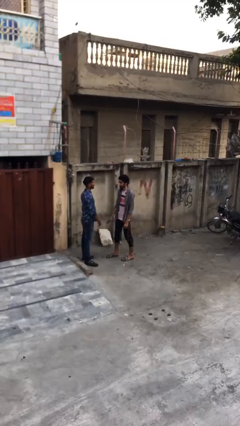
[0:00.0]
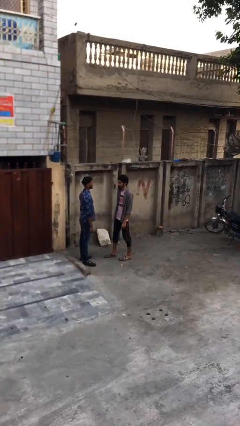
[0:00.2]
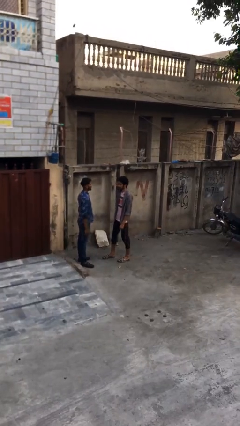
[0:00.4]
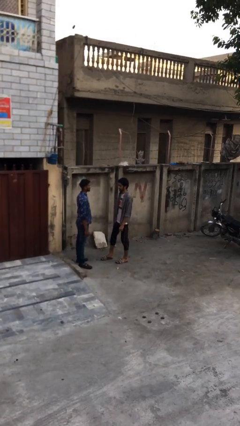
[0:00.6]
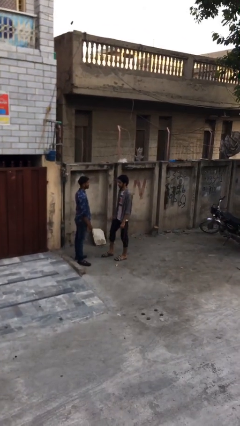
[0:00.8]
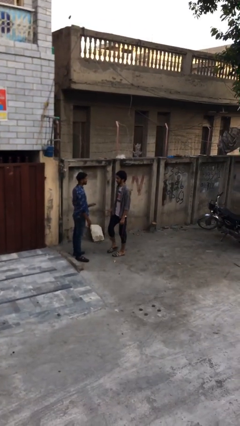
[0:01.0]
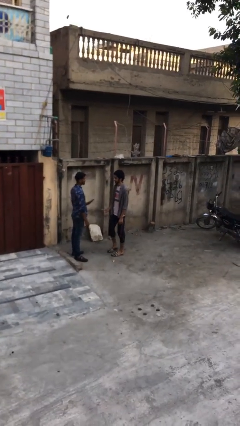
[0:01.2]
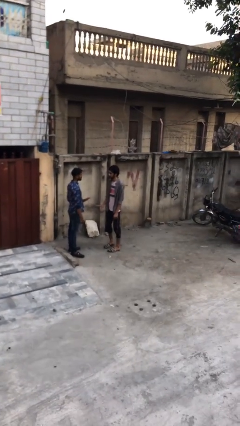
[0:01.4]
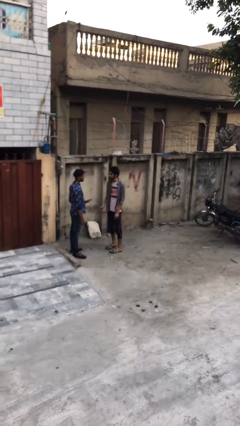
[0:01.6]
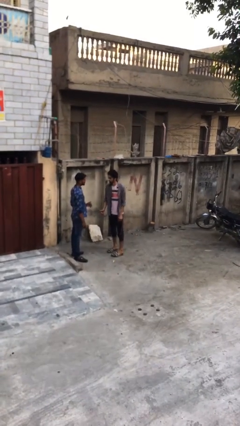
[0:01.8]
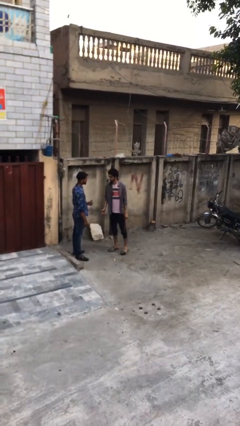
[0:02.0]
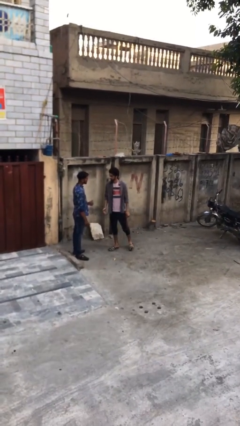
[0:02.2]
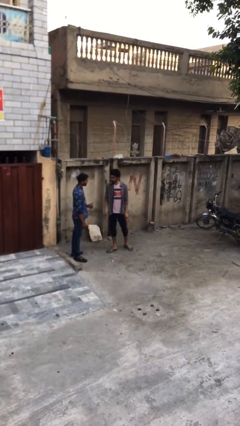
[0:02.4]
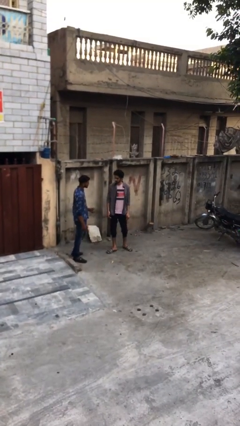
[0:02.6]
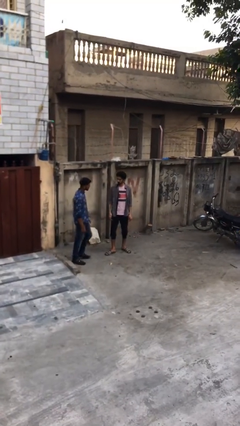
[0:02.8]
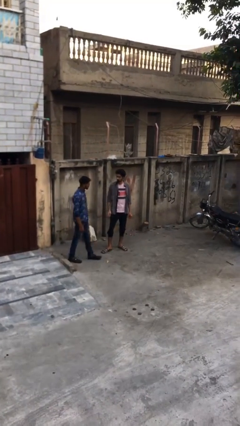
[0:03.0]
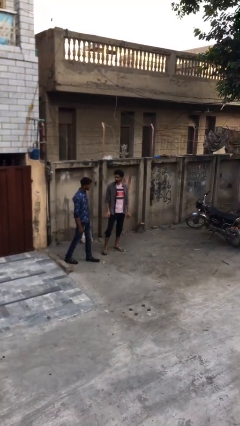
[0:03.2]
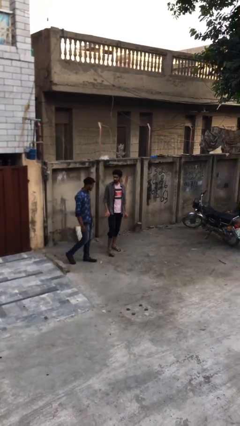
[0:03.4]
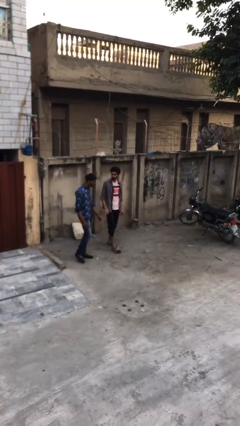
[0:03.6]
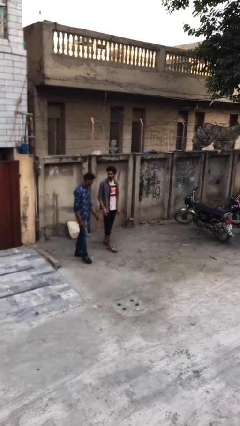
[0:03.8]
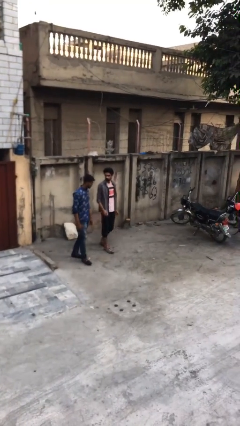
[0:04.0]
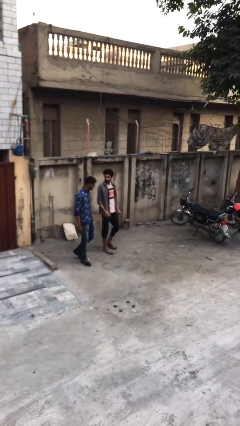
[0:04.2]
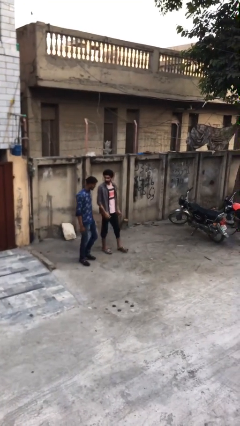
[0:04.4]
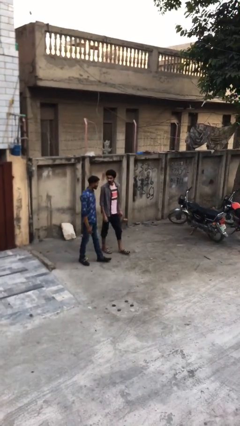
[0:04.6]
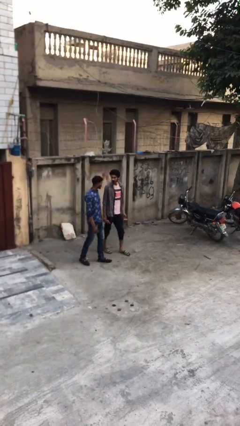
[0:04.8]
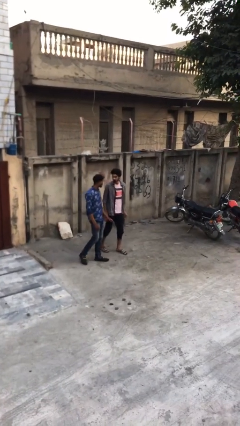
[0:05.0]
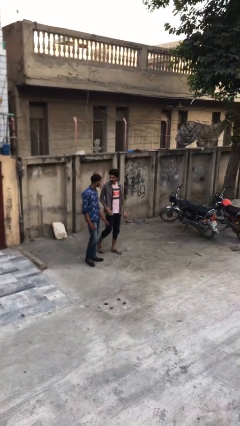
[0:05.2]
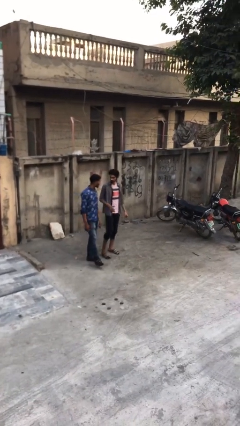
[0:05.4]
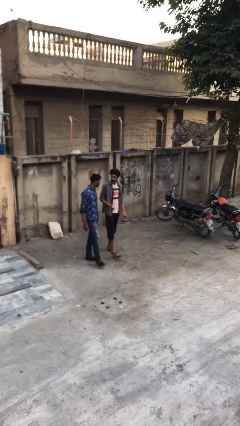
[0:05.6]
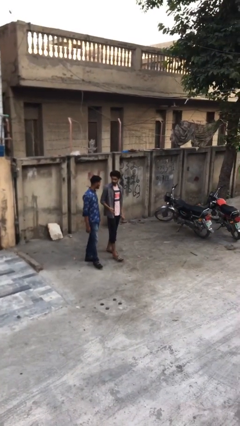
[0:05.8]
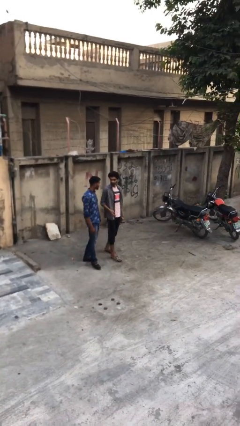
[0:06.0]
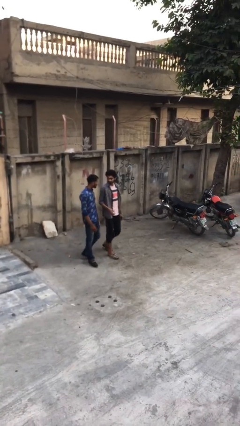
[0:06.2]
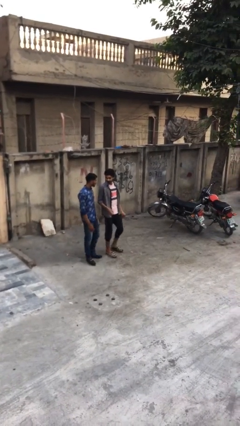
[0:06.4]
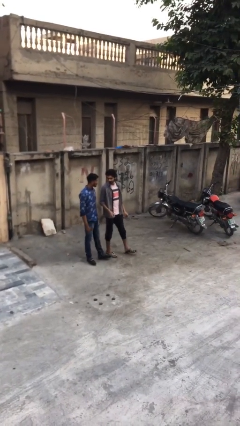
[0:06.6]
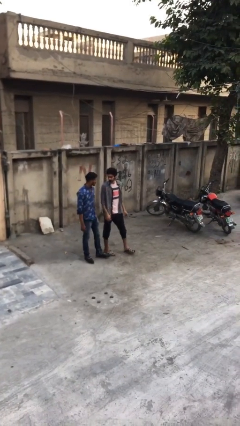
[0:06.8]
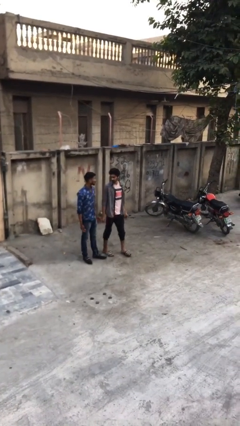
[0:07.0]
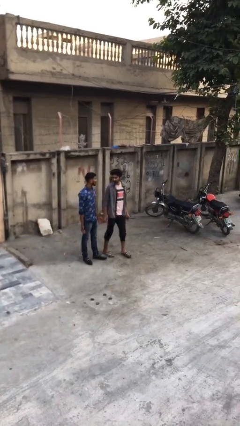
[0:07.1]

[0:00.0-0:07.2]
person talks to person

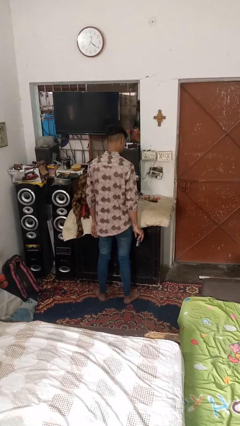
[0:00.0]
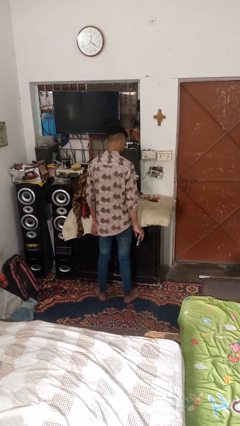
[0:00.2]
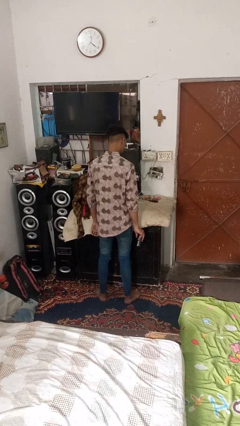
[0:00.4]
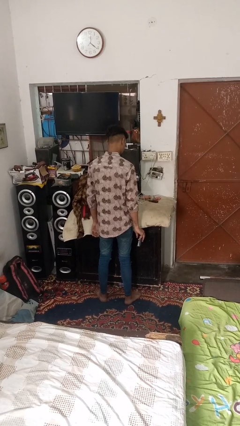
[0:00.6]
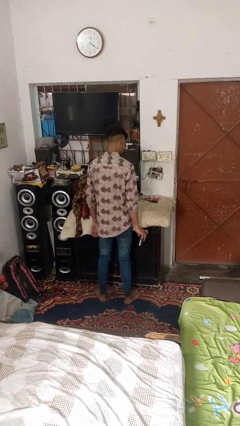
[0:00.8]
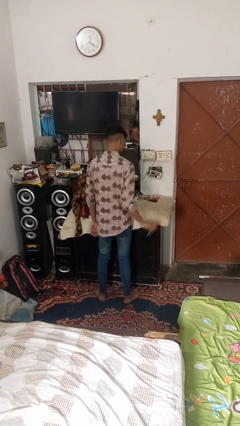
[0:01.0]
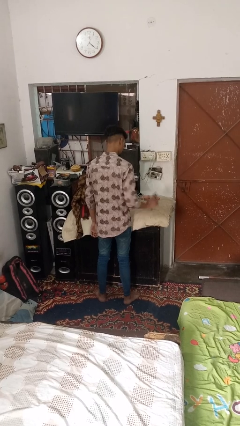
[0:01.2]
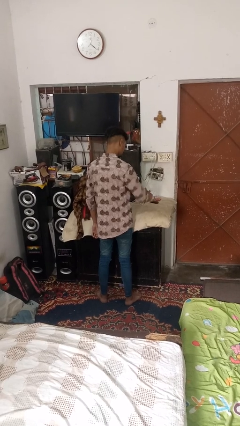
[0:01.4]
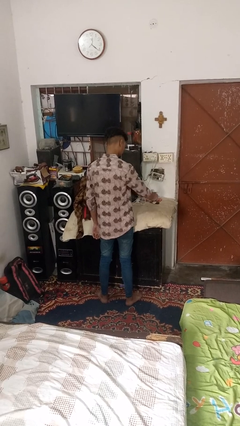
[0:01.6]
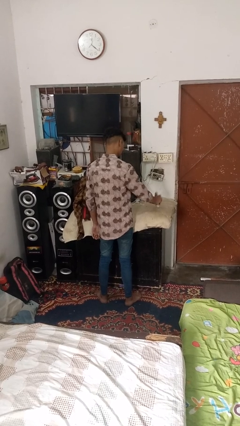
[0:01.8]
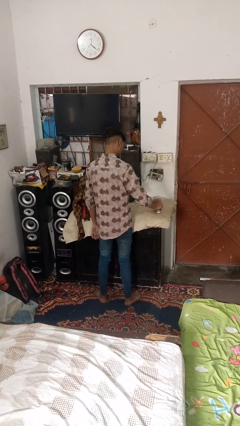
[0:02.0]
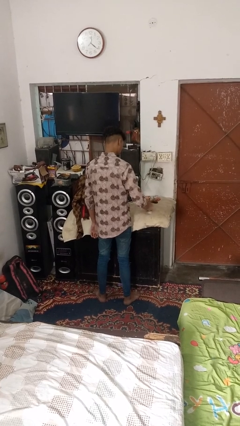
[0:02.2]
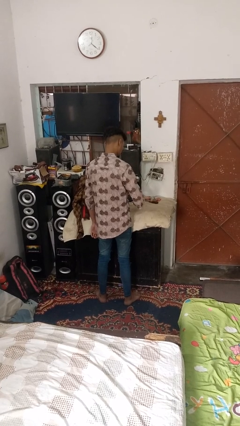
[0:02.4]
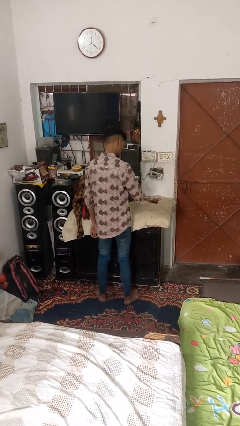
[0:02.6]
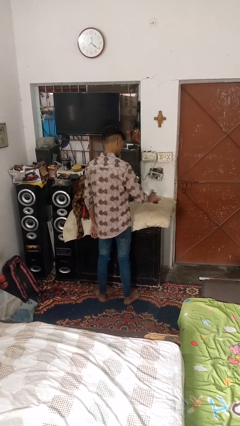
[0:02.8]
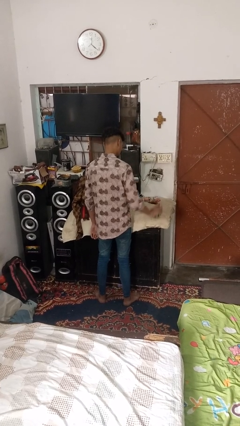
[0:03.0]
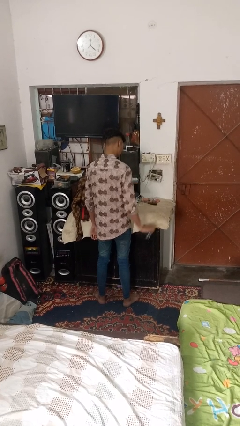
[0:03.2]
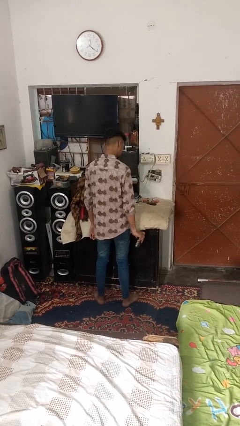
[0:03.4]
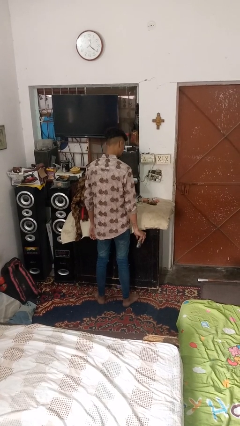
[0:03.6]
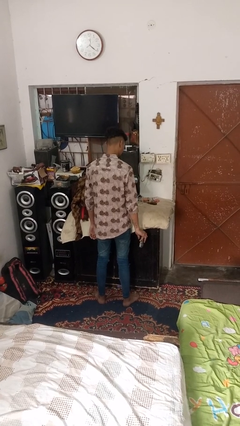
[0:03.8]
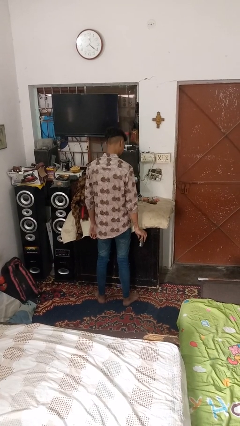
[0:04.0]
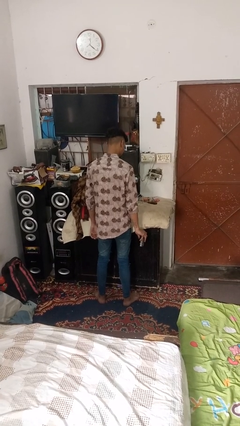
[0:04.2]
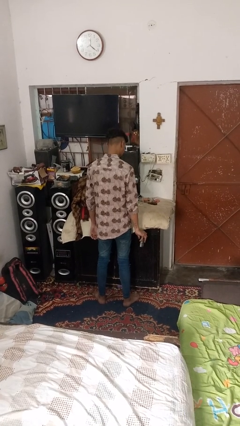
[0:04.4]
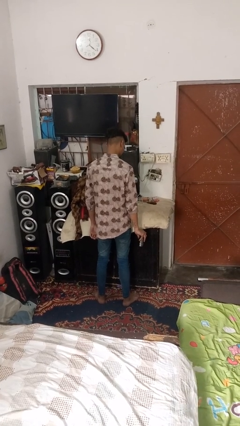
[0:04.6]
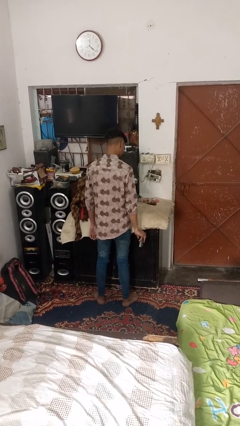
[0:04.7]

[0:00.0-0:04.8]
person sprays from bottle

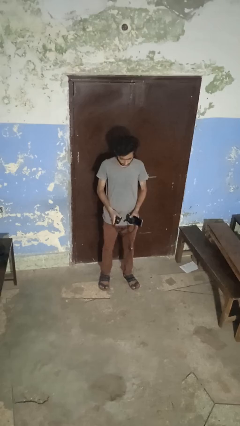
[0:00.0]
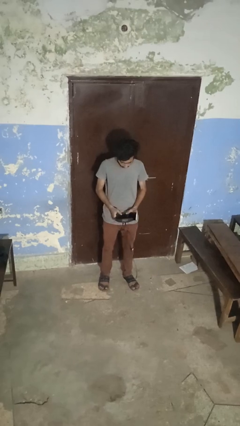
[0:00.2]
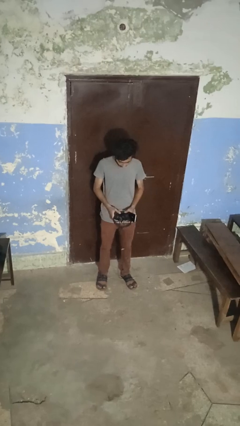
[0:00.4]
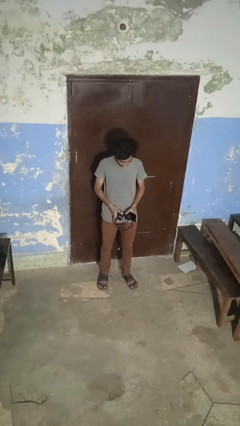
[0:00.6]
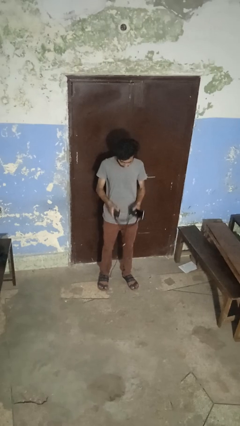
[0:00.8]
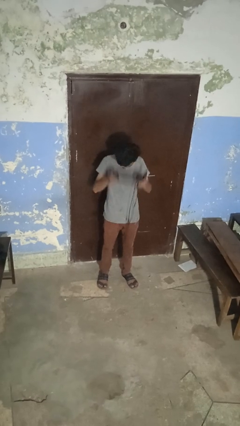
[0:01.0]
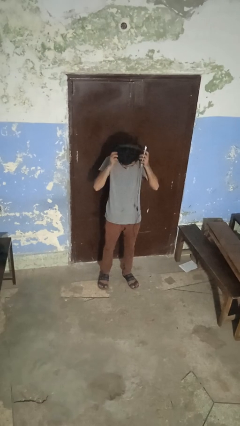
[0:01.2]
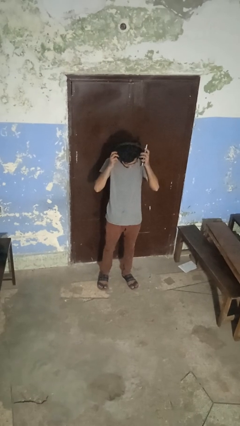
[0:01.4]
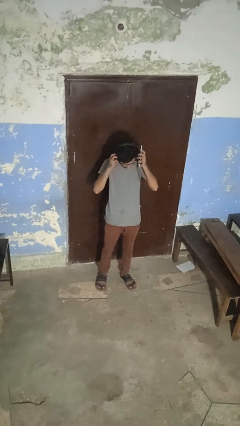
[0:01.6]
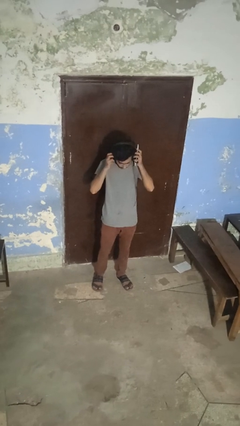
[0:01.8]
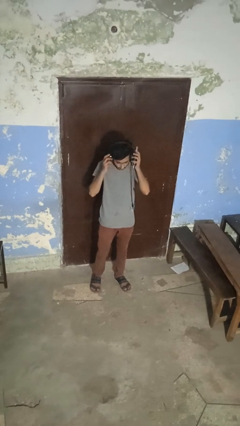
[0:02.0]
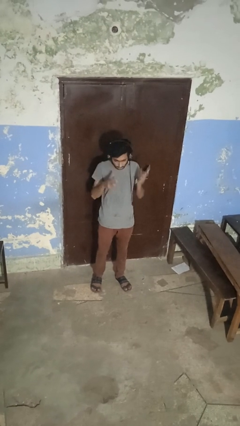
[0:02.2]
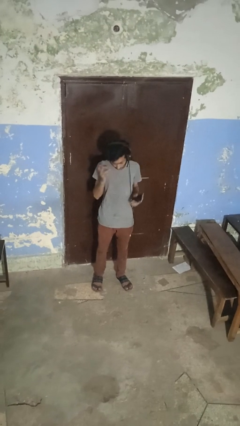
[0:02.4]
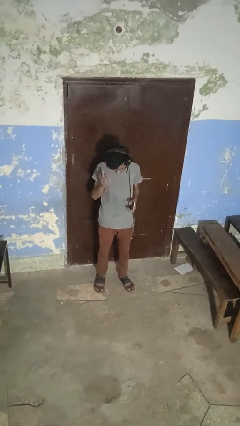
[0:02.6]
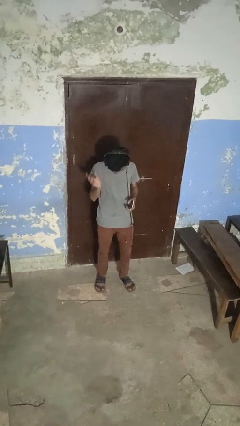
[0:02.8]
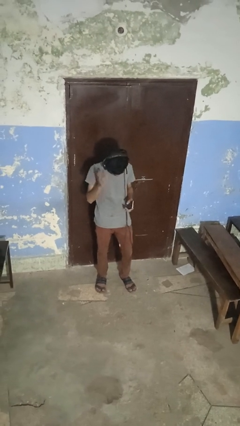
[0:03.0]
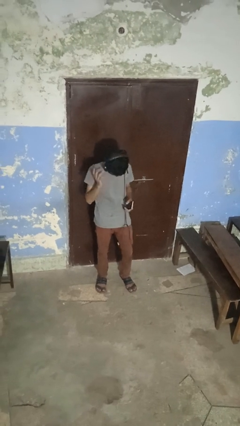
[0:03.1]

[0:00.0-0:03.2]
person puts on headphones

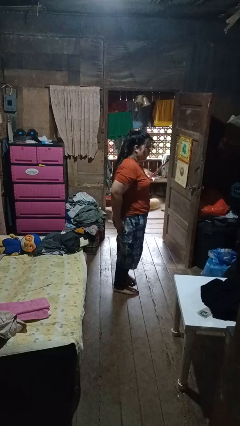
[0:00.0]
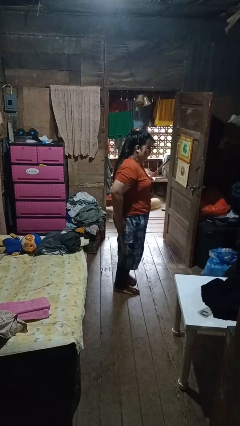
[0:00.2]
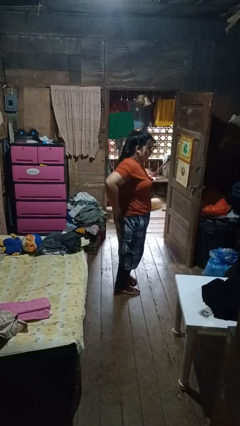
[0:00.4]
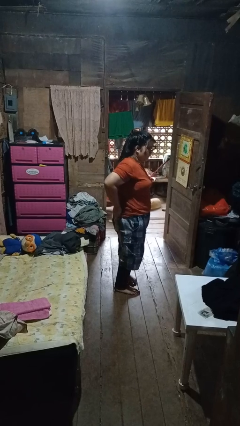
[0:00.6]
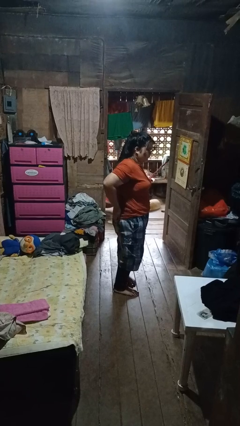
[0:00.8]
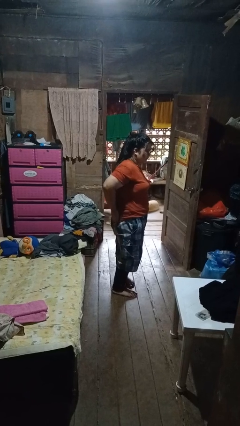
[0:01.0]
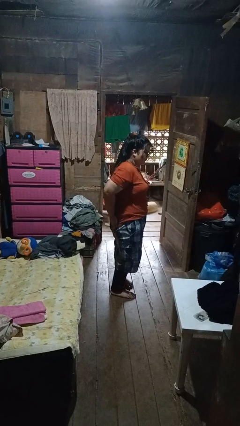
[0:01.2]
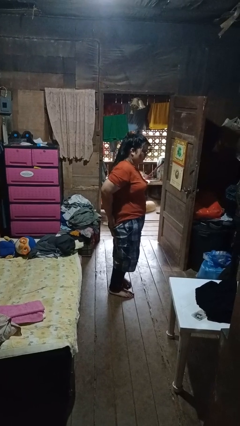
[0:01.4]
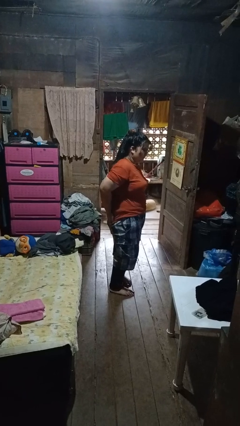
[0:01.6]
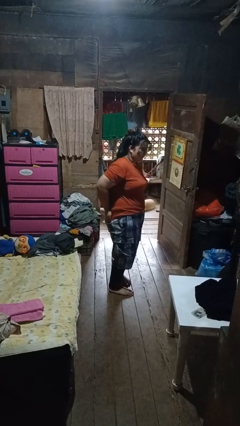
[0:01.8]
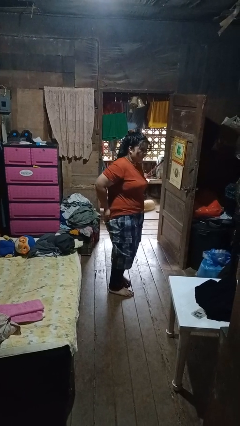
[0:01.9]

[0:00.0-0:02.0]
person puts hands in back pockets

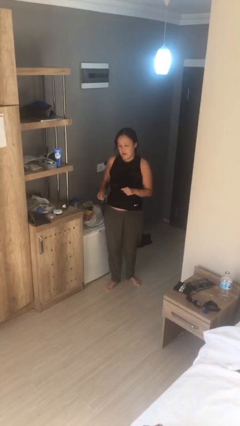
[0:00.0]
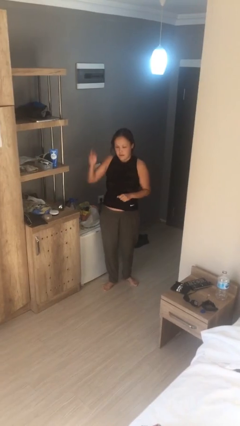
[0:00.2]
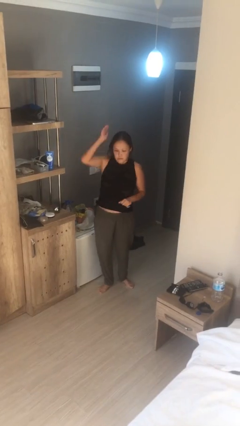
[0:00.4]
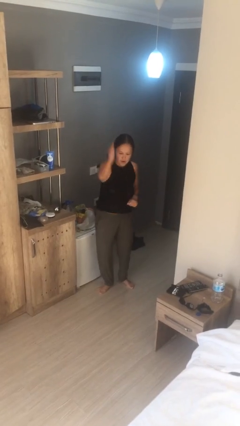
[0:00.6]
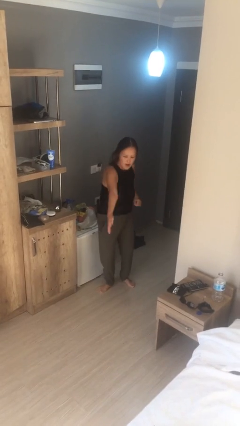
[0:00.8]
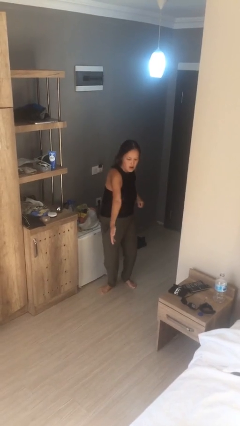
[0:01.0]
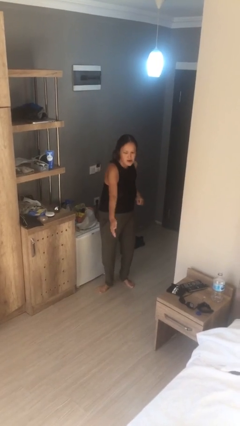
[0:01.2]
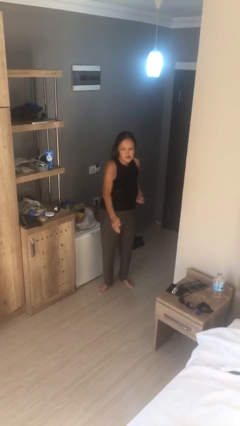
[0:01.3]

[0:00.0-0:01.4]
person karate chop
